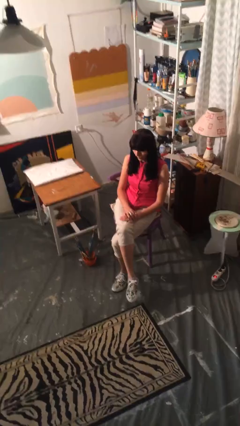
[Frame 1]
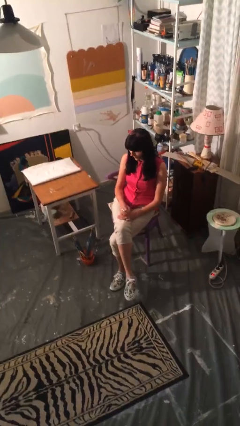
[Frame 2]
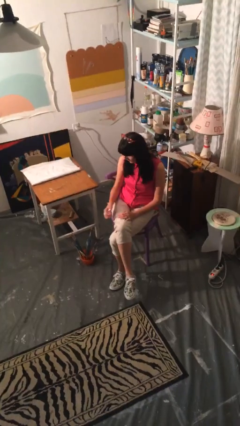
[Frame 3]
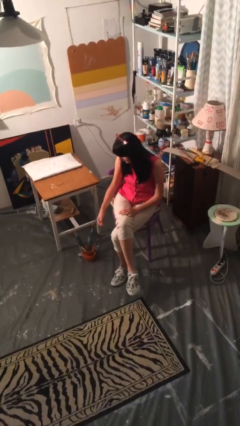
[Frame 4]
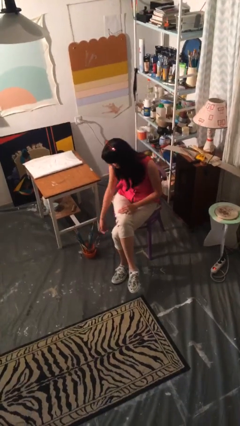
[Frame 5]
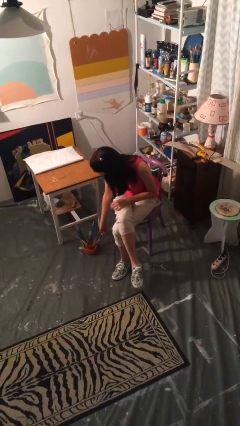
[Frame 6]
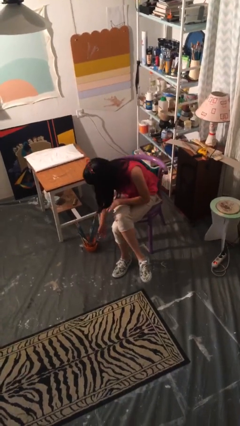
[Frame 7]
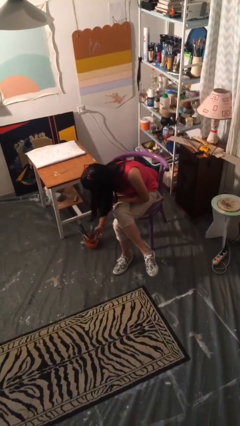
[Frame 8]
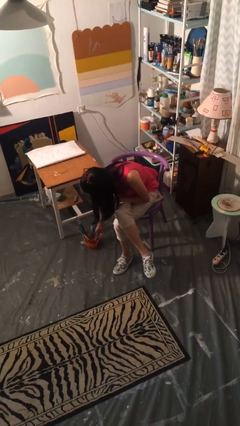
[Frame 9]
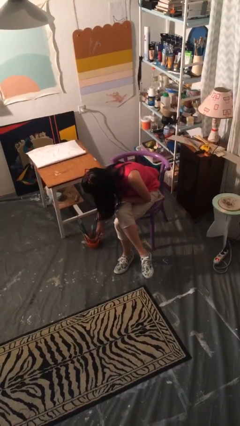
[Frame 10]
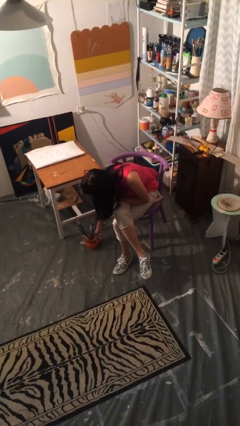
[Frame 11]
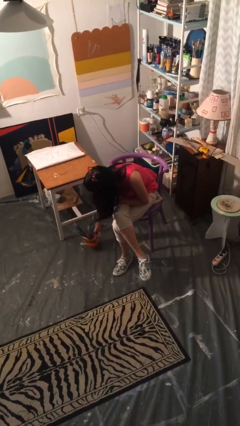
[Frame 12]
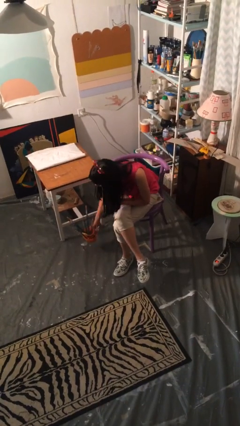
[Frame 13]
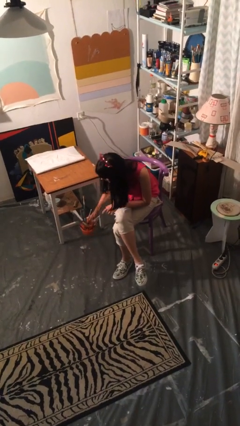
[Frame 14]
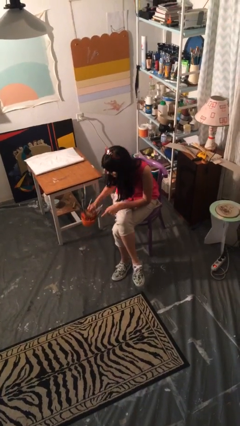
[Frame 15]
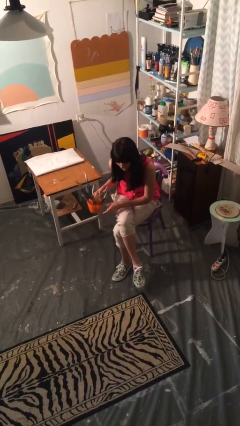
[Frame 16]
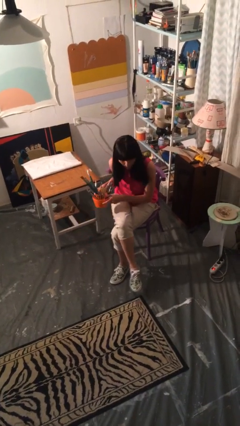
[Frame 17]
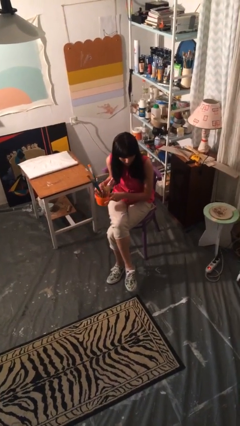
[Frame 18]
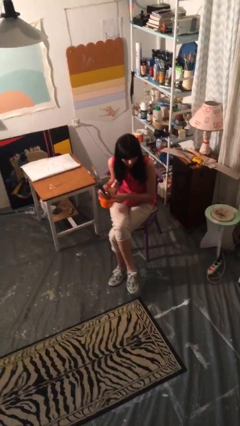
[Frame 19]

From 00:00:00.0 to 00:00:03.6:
person picks up object from floor

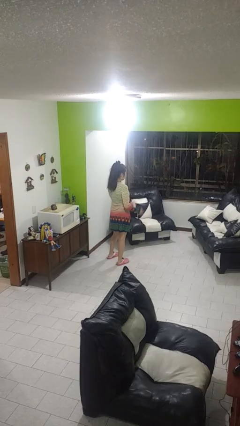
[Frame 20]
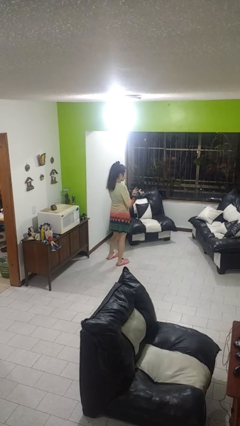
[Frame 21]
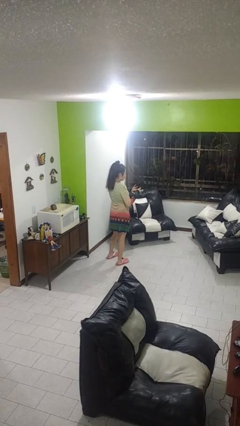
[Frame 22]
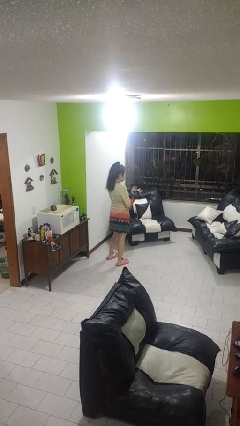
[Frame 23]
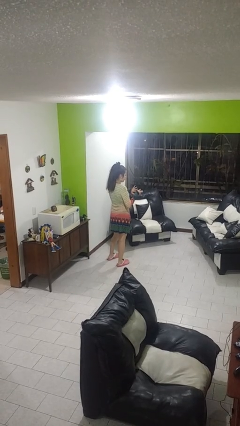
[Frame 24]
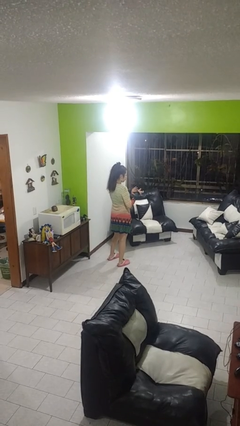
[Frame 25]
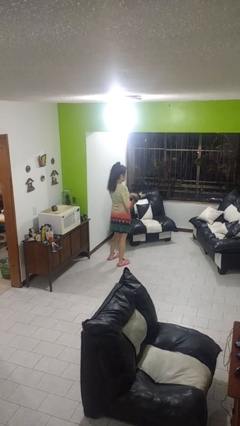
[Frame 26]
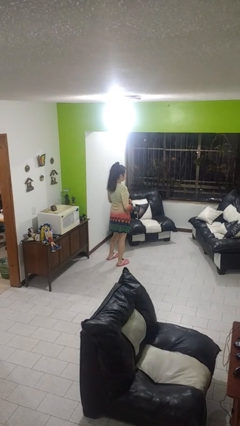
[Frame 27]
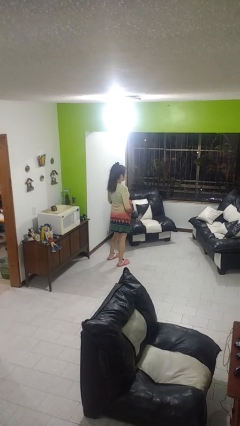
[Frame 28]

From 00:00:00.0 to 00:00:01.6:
person clips fingernails

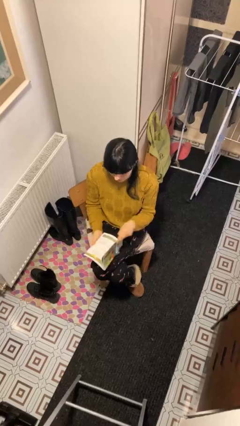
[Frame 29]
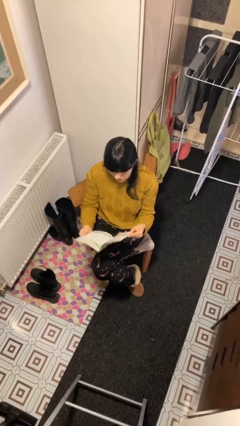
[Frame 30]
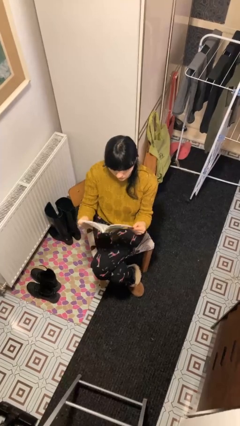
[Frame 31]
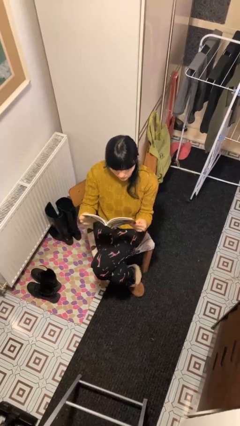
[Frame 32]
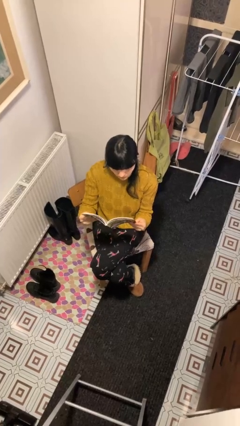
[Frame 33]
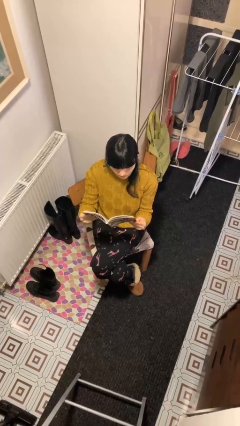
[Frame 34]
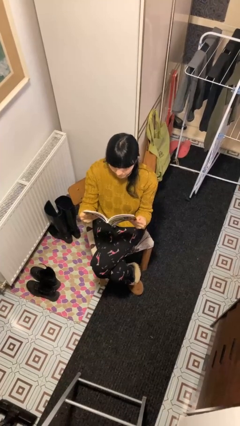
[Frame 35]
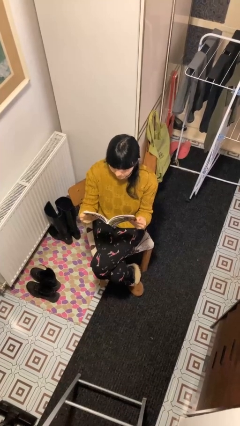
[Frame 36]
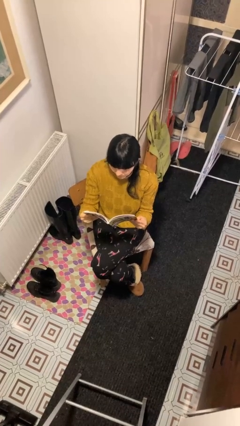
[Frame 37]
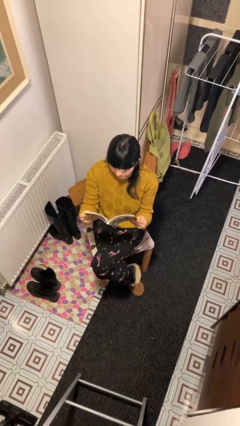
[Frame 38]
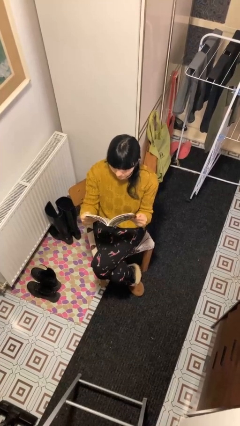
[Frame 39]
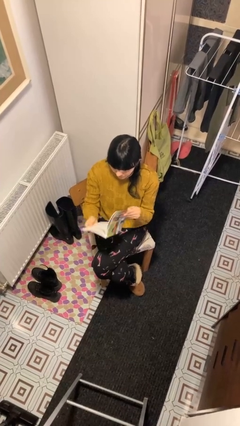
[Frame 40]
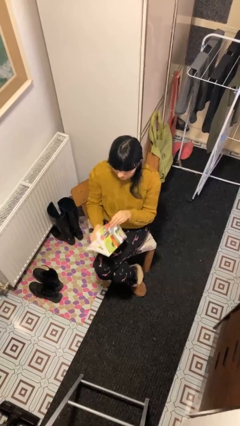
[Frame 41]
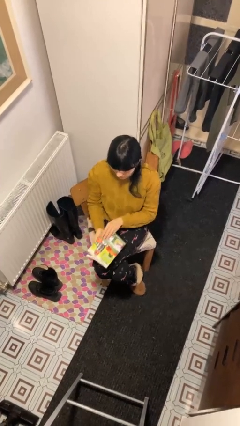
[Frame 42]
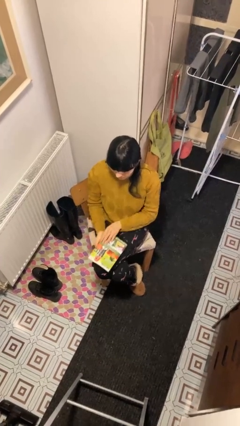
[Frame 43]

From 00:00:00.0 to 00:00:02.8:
person reads document

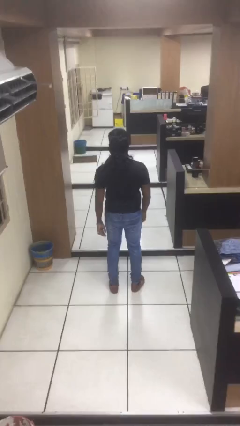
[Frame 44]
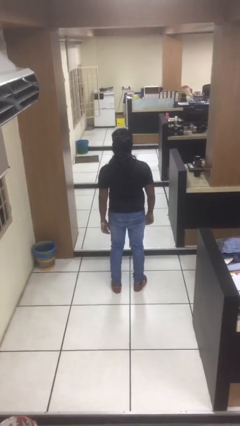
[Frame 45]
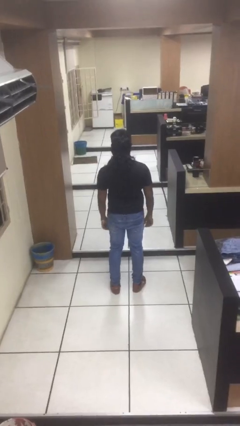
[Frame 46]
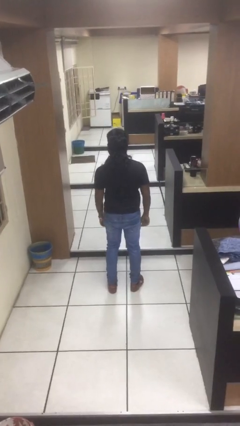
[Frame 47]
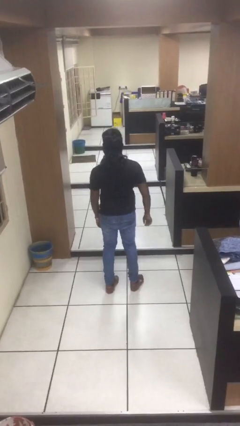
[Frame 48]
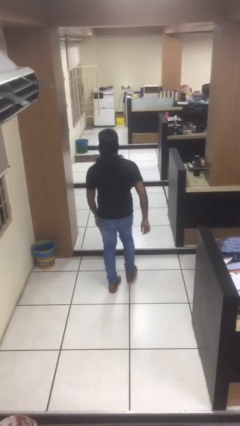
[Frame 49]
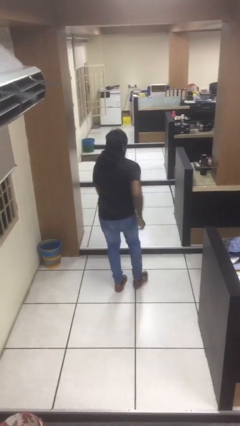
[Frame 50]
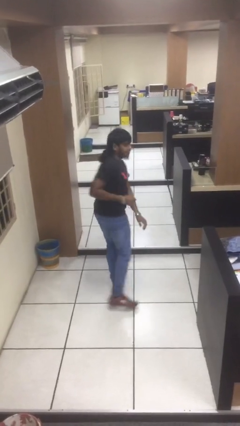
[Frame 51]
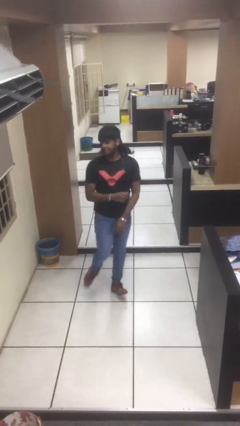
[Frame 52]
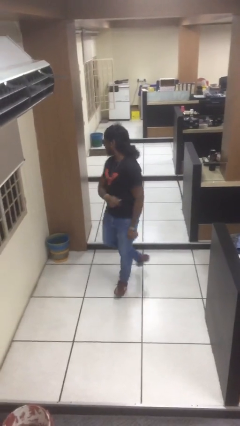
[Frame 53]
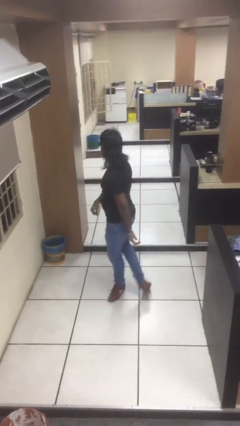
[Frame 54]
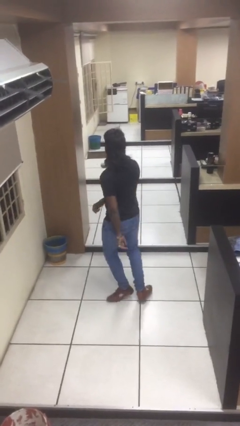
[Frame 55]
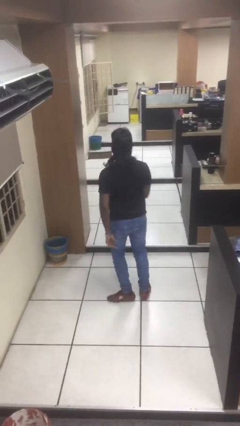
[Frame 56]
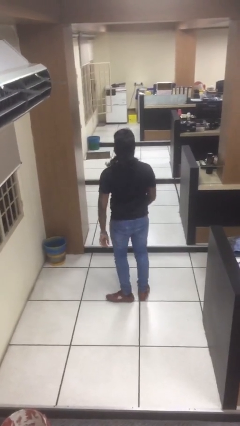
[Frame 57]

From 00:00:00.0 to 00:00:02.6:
person twirls

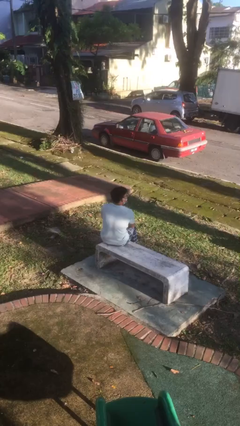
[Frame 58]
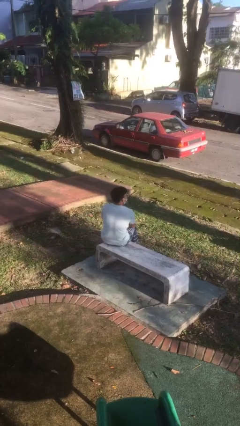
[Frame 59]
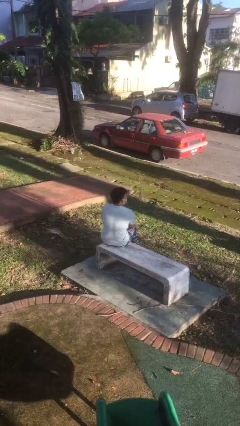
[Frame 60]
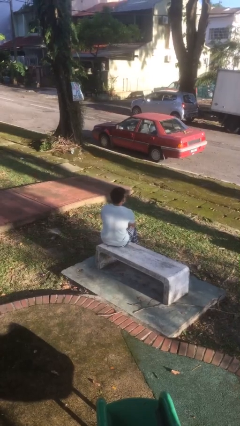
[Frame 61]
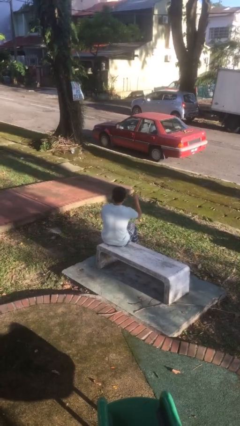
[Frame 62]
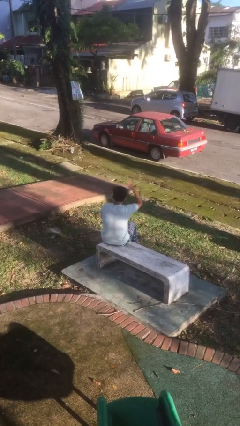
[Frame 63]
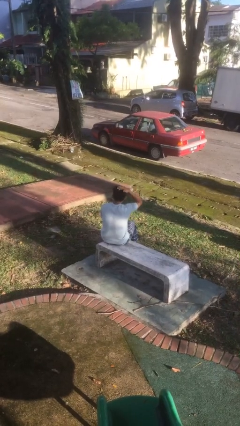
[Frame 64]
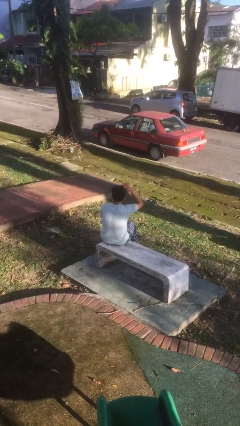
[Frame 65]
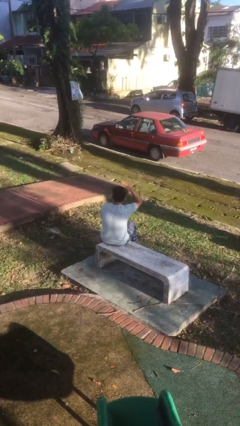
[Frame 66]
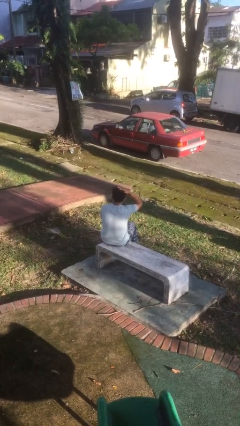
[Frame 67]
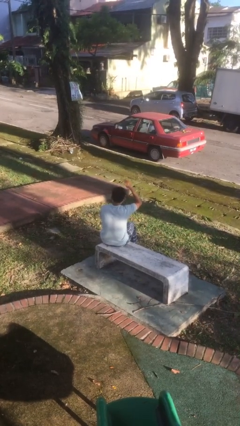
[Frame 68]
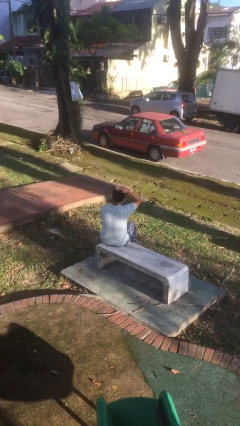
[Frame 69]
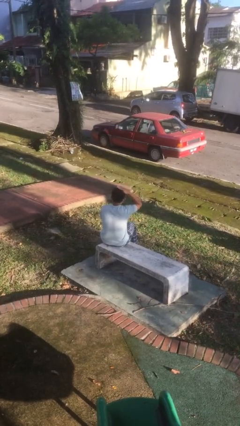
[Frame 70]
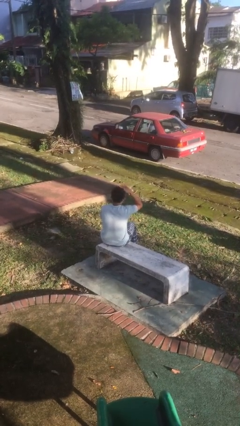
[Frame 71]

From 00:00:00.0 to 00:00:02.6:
person pats head

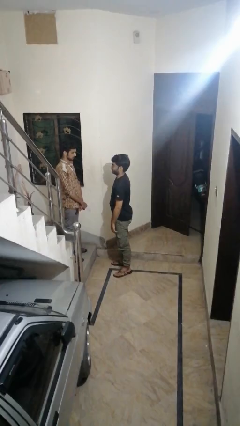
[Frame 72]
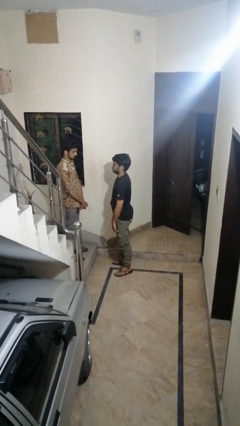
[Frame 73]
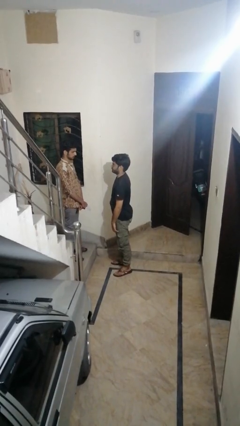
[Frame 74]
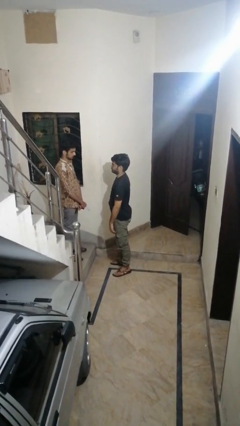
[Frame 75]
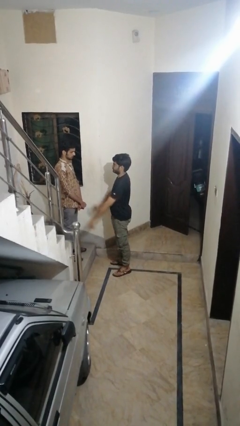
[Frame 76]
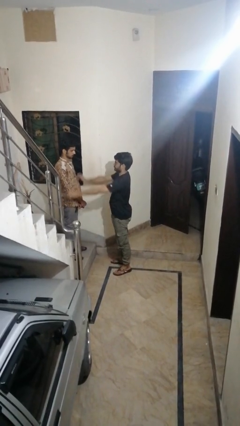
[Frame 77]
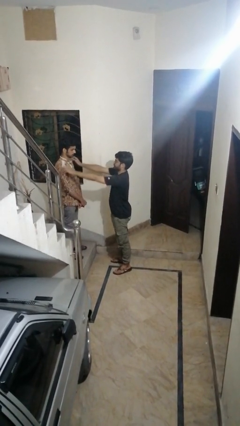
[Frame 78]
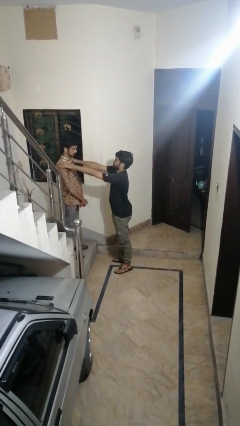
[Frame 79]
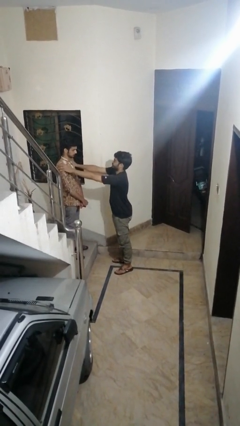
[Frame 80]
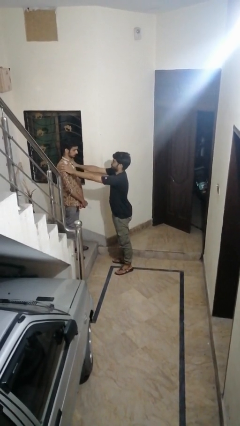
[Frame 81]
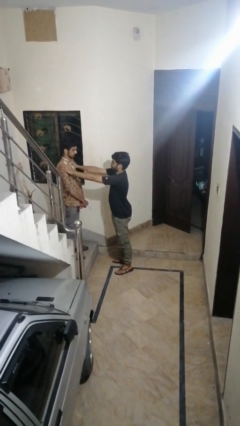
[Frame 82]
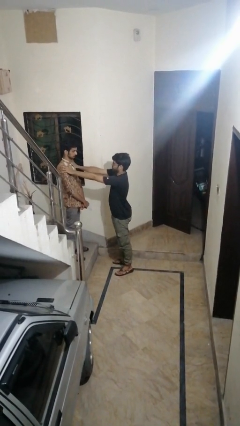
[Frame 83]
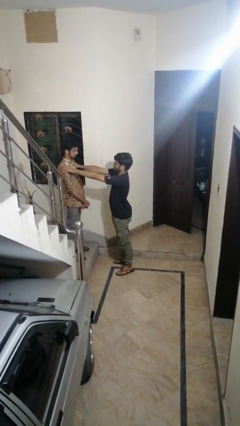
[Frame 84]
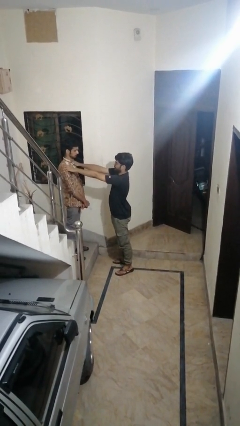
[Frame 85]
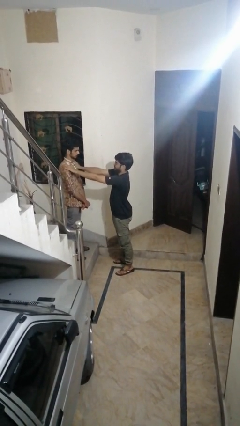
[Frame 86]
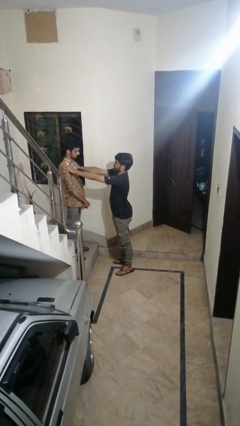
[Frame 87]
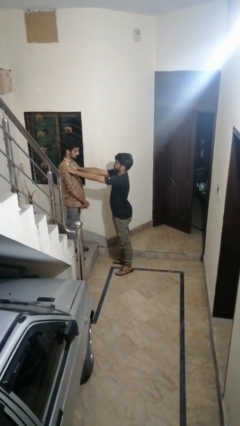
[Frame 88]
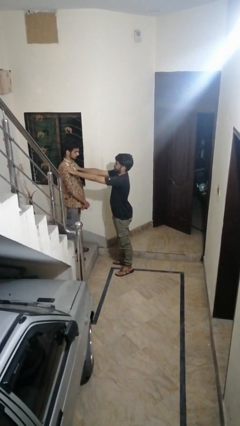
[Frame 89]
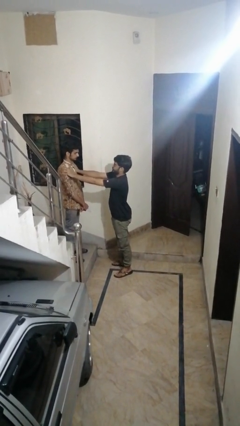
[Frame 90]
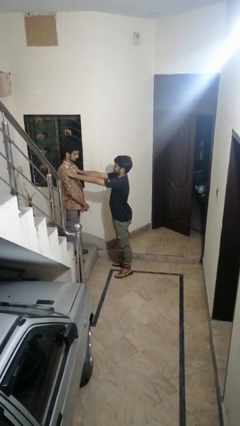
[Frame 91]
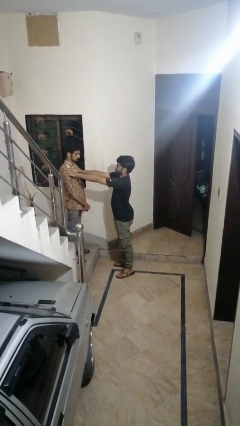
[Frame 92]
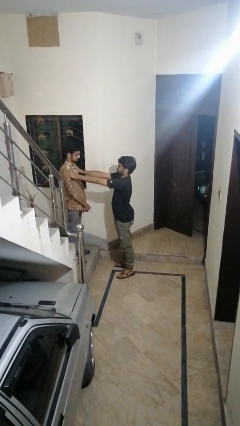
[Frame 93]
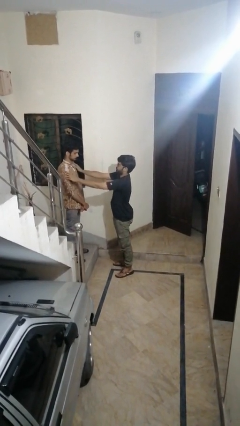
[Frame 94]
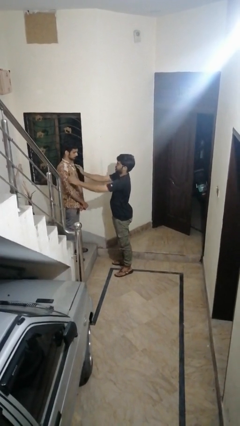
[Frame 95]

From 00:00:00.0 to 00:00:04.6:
person pounds shoulders of person
